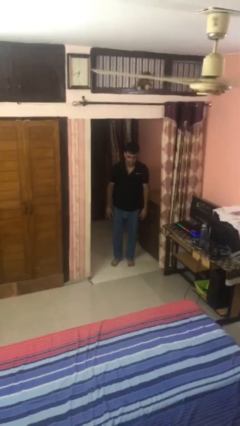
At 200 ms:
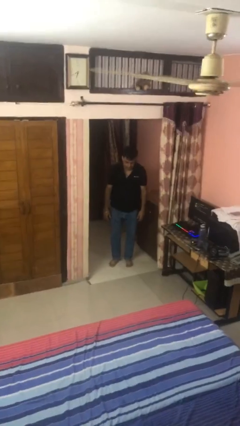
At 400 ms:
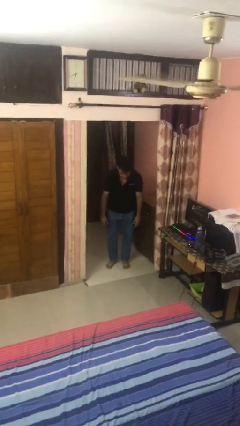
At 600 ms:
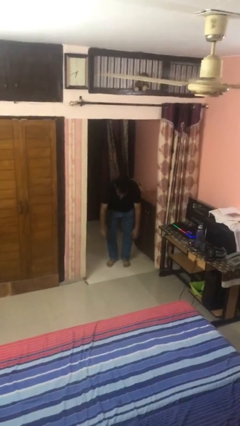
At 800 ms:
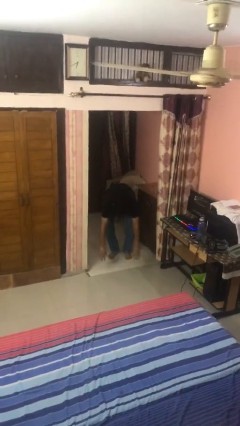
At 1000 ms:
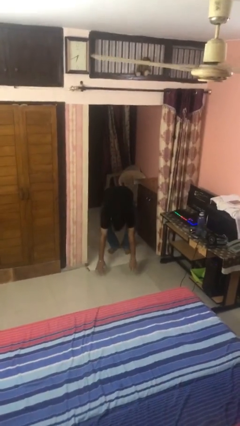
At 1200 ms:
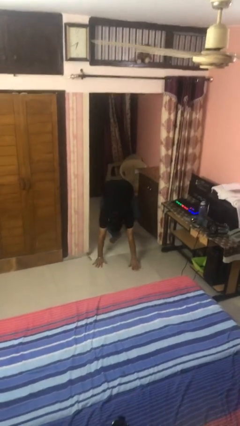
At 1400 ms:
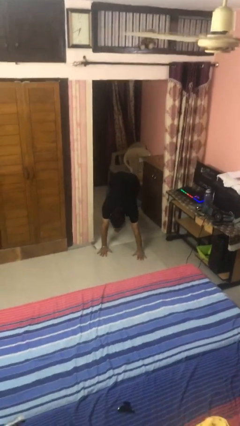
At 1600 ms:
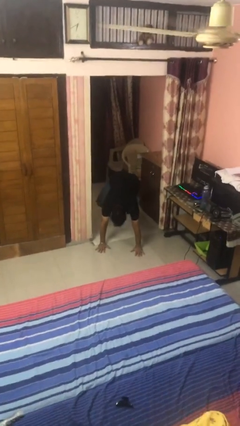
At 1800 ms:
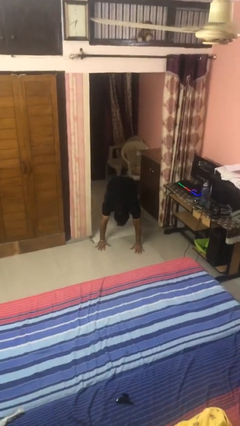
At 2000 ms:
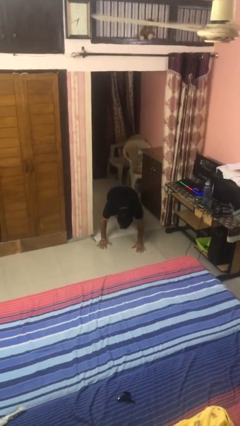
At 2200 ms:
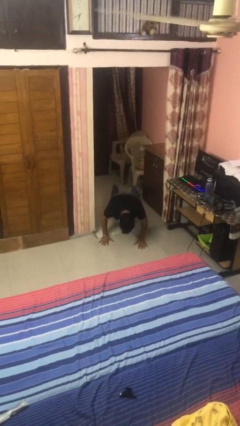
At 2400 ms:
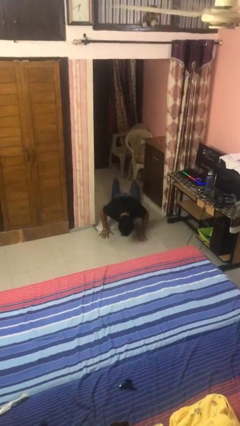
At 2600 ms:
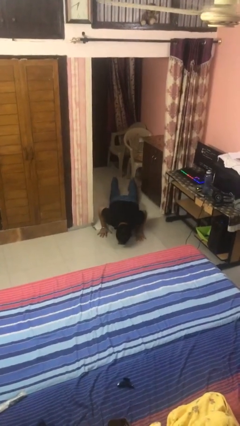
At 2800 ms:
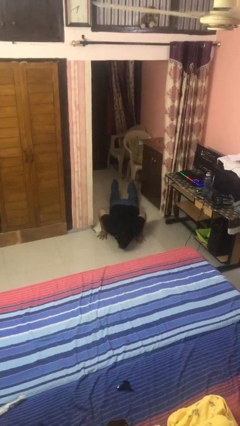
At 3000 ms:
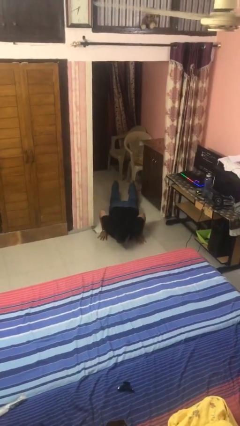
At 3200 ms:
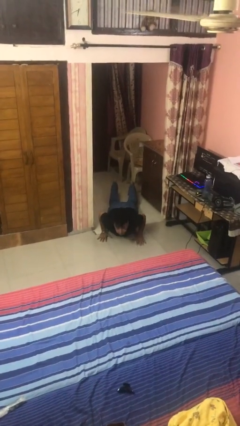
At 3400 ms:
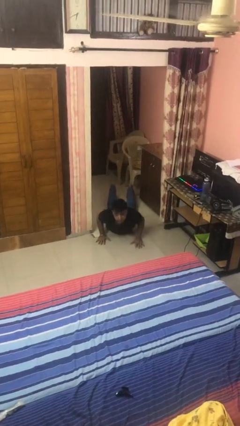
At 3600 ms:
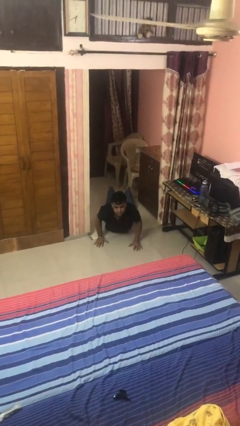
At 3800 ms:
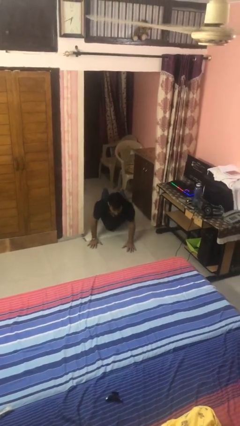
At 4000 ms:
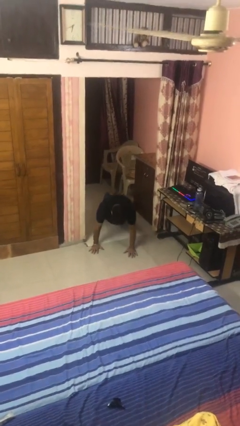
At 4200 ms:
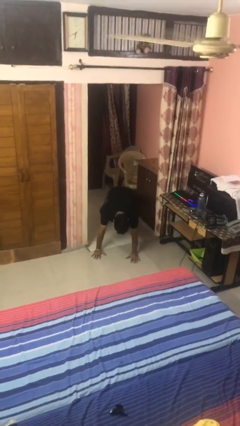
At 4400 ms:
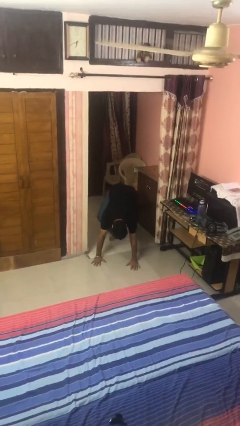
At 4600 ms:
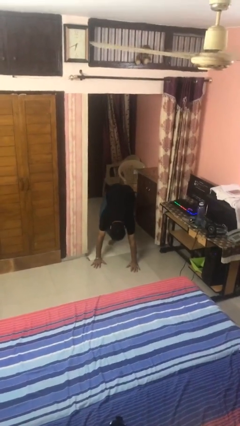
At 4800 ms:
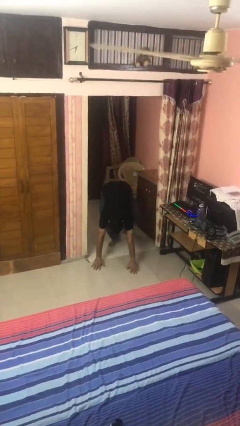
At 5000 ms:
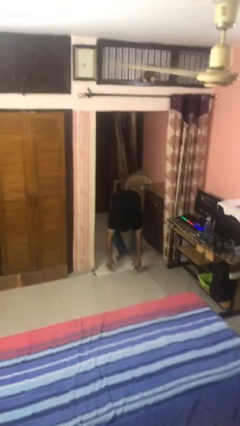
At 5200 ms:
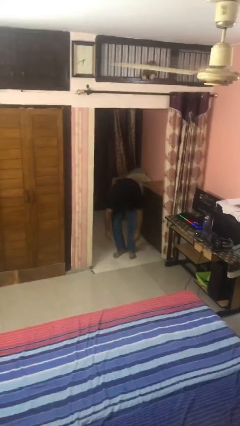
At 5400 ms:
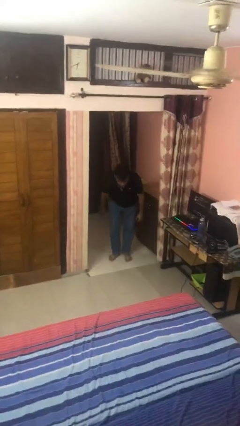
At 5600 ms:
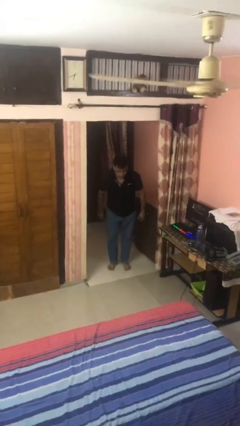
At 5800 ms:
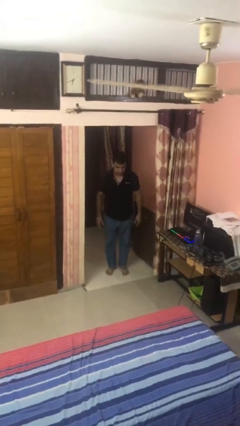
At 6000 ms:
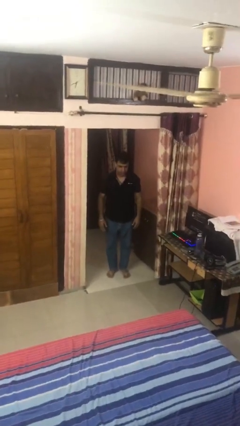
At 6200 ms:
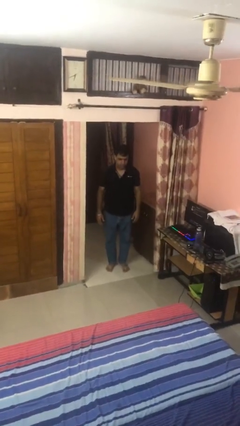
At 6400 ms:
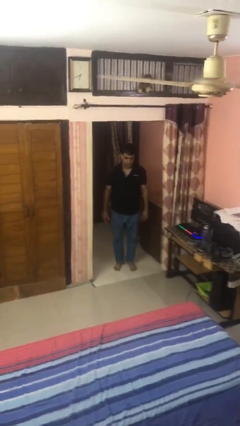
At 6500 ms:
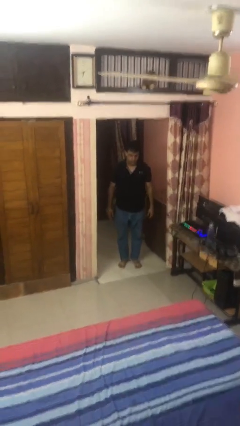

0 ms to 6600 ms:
person exercises with pushup

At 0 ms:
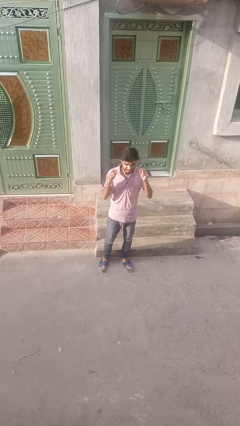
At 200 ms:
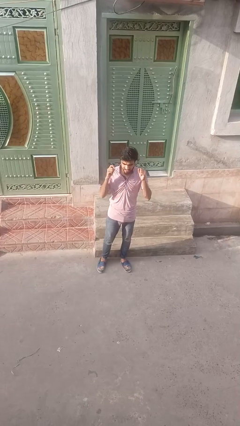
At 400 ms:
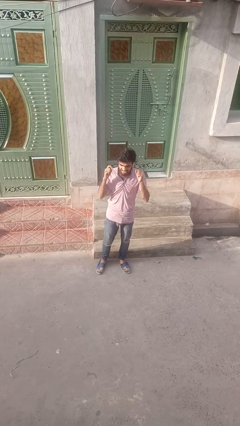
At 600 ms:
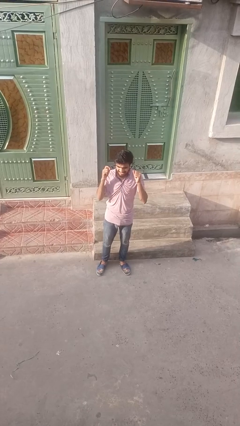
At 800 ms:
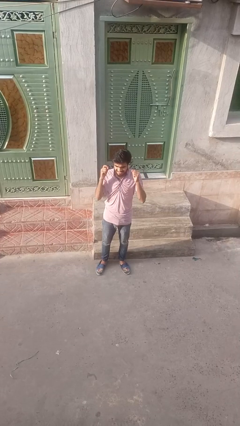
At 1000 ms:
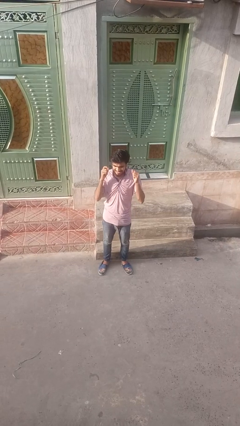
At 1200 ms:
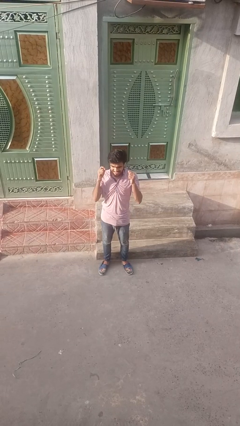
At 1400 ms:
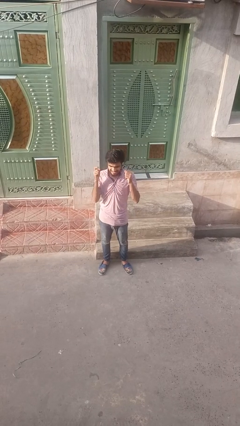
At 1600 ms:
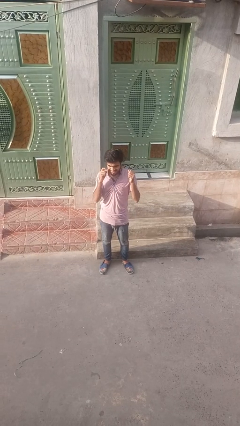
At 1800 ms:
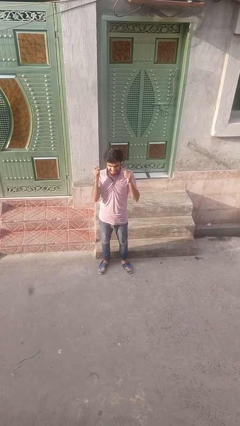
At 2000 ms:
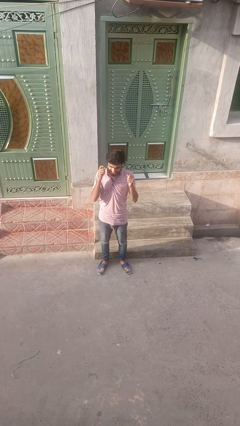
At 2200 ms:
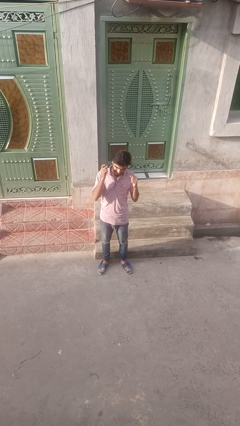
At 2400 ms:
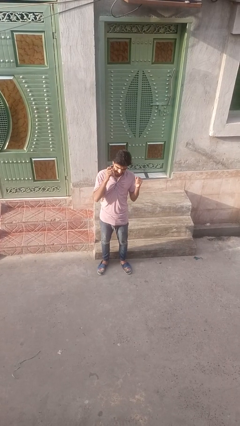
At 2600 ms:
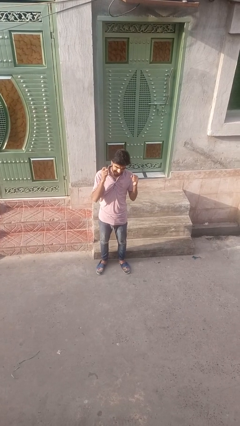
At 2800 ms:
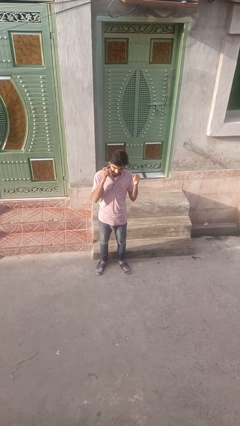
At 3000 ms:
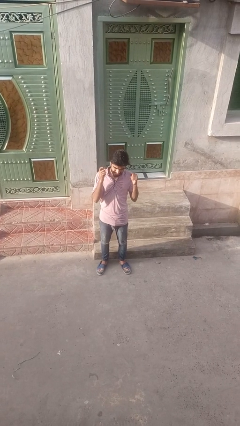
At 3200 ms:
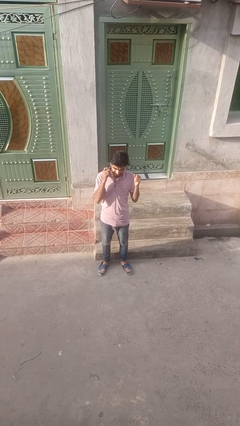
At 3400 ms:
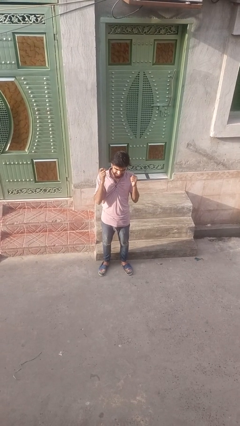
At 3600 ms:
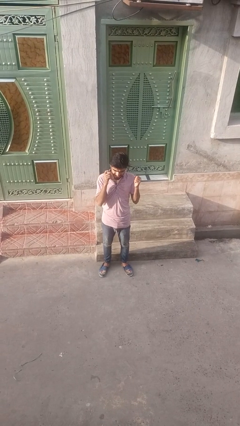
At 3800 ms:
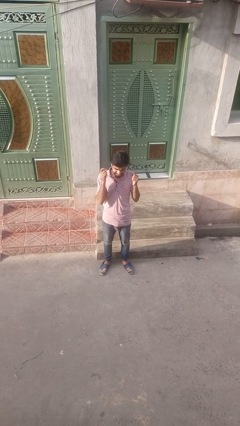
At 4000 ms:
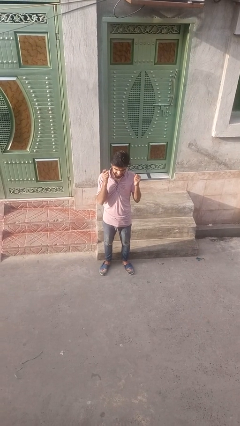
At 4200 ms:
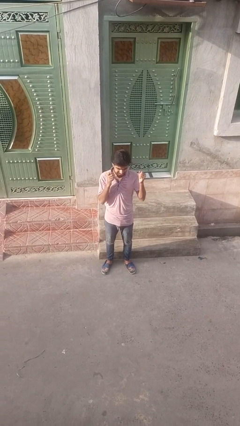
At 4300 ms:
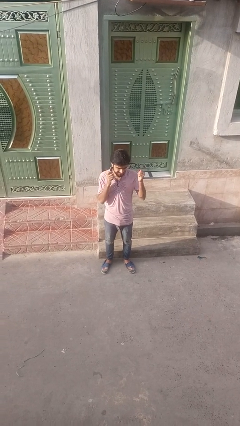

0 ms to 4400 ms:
person flosses

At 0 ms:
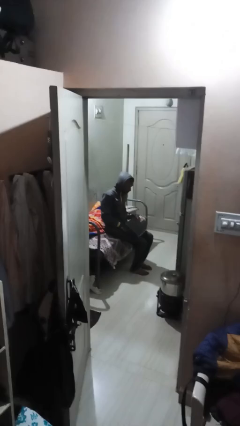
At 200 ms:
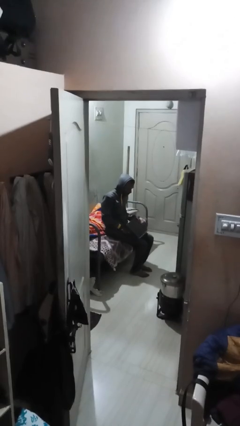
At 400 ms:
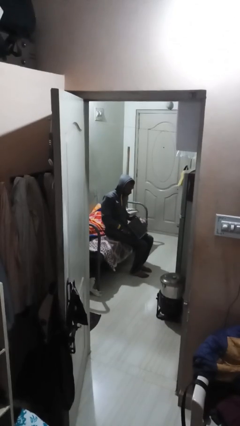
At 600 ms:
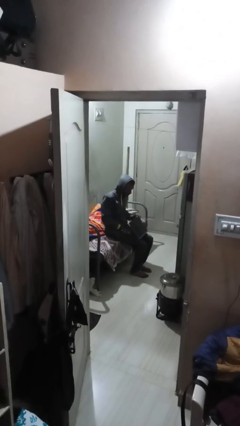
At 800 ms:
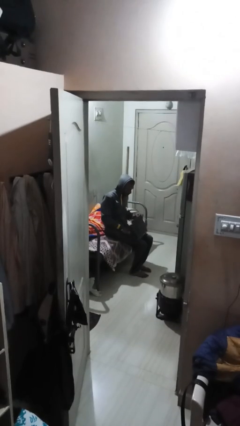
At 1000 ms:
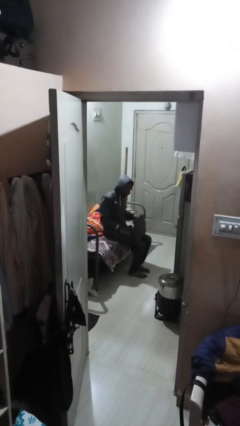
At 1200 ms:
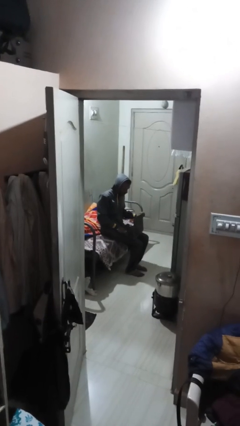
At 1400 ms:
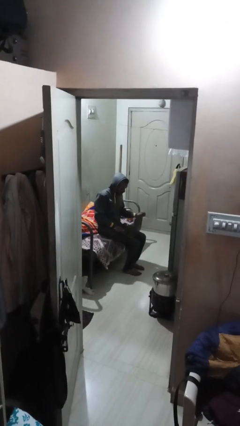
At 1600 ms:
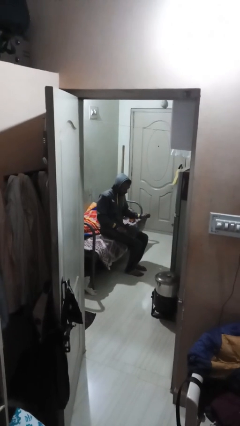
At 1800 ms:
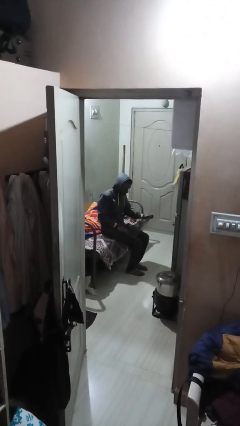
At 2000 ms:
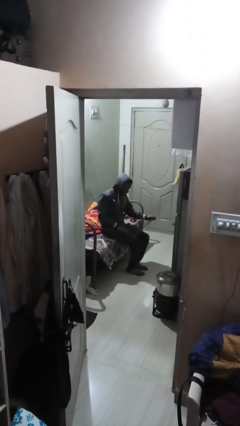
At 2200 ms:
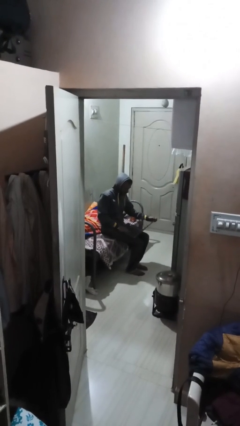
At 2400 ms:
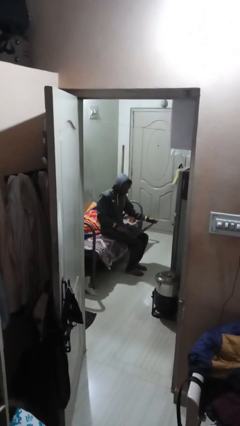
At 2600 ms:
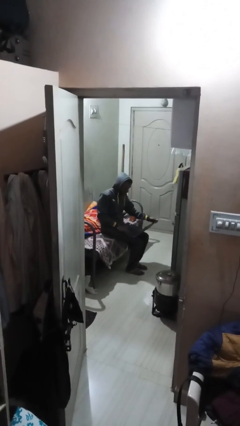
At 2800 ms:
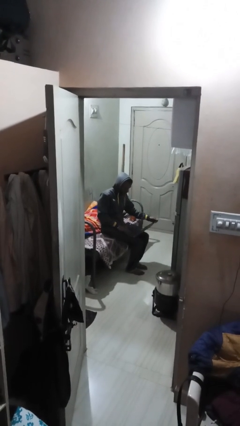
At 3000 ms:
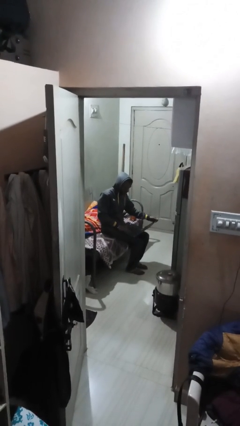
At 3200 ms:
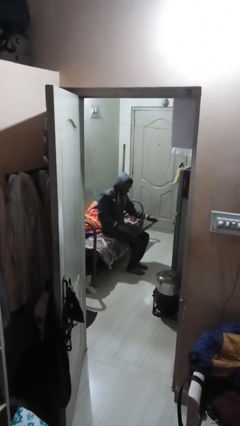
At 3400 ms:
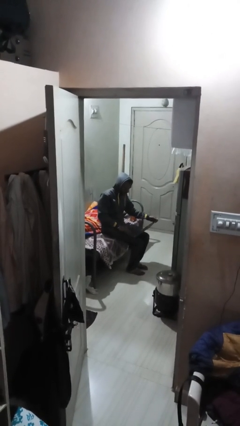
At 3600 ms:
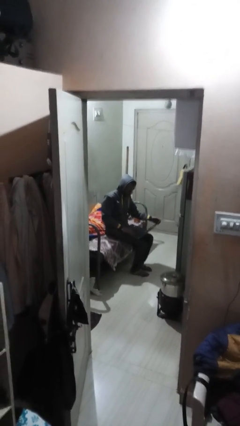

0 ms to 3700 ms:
person interacts with laptop

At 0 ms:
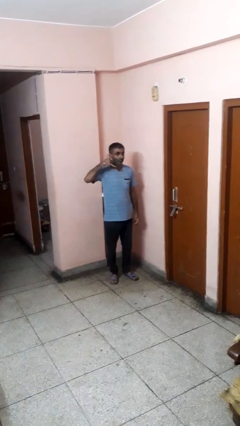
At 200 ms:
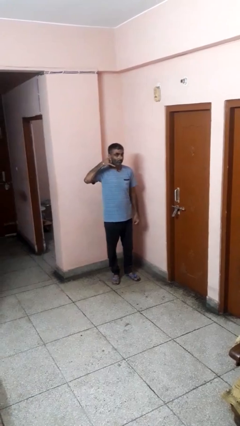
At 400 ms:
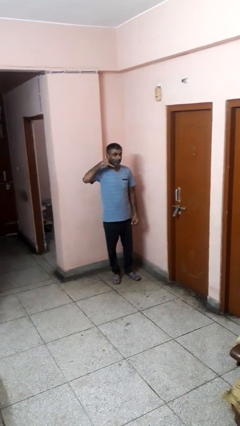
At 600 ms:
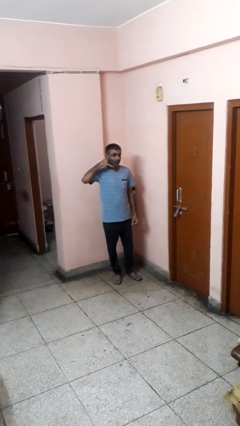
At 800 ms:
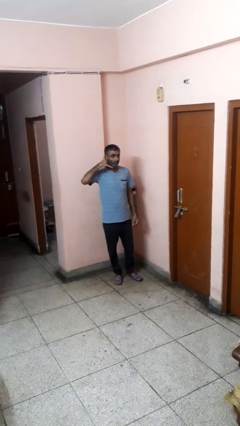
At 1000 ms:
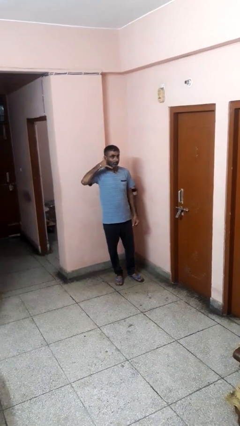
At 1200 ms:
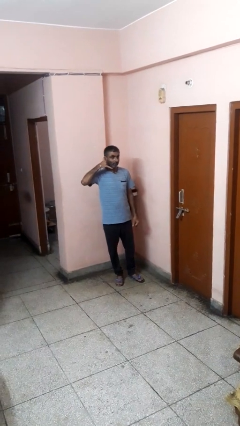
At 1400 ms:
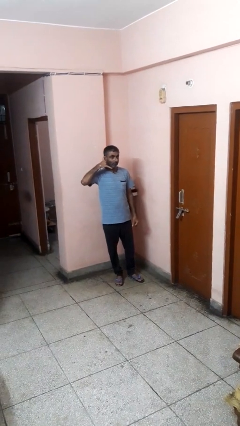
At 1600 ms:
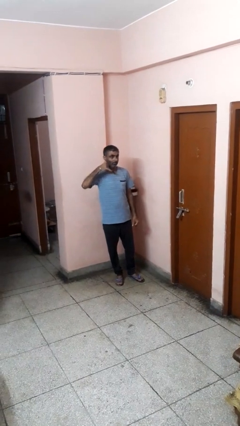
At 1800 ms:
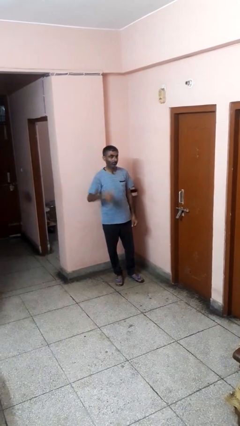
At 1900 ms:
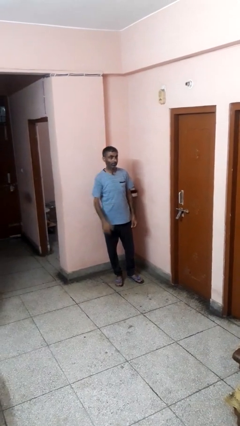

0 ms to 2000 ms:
person gestures call me

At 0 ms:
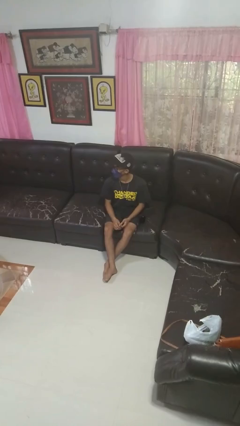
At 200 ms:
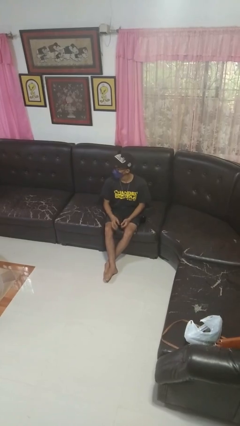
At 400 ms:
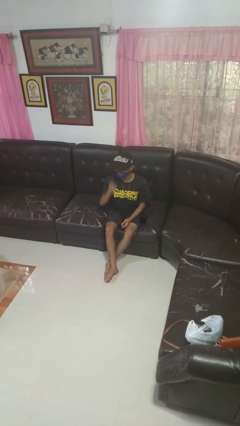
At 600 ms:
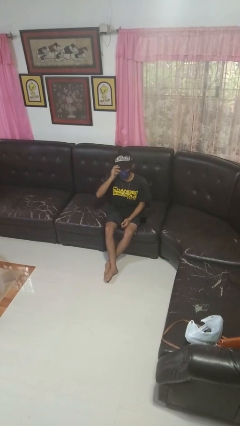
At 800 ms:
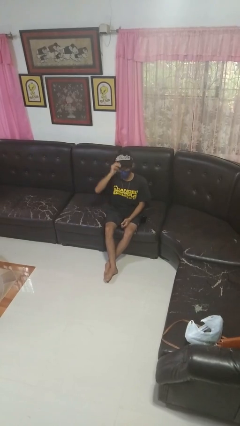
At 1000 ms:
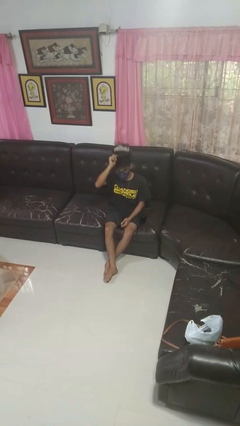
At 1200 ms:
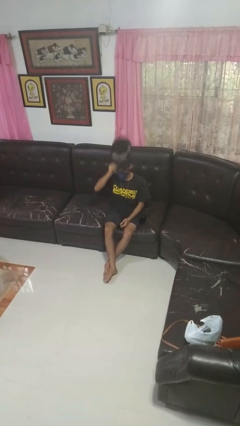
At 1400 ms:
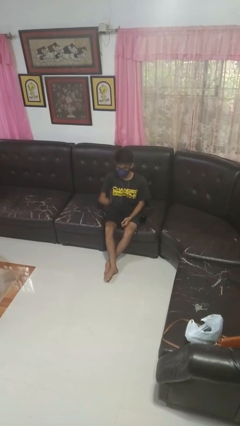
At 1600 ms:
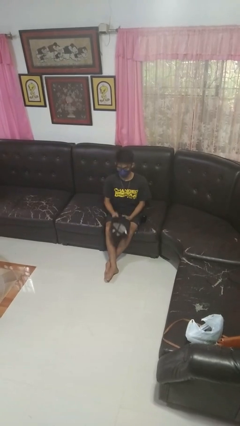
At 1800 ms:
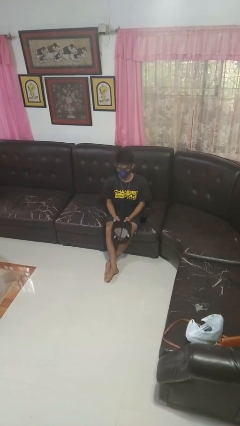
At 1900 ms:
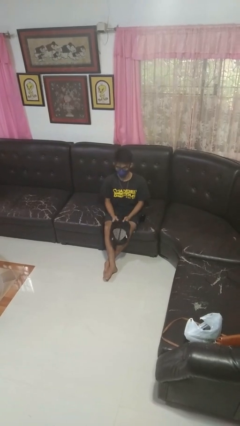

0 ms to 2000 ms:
person takes off hat
